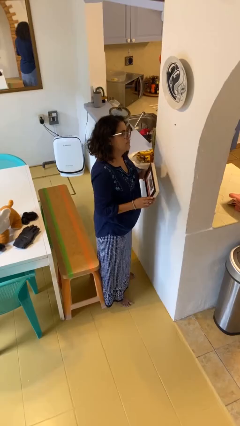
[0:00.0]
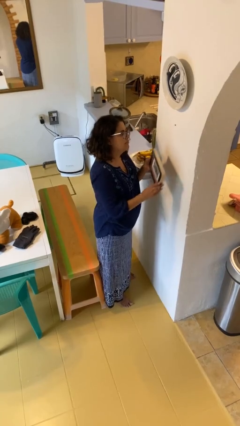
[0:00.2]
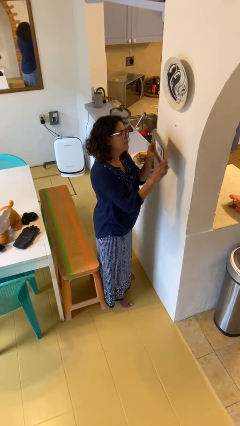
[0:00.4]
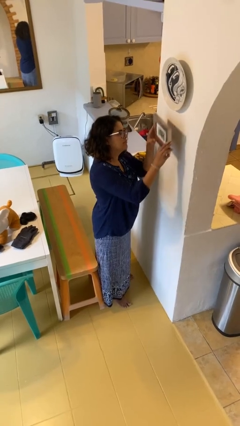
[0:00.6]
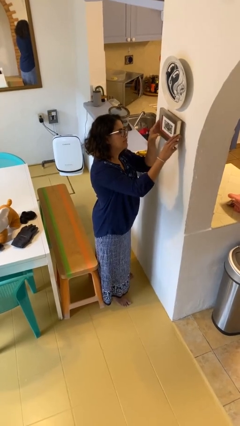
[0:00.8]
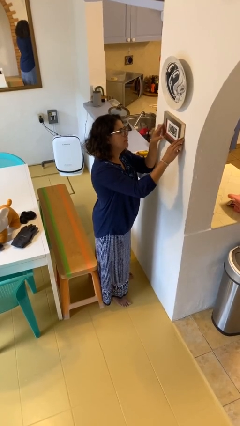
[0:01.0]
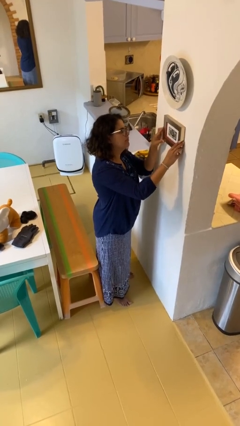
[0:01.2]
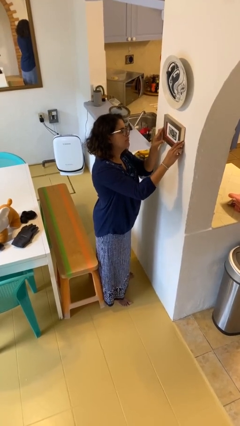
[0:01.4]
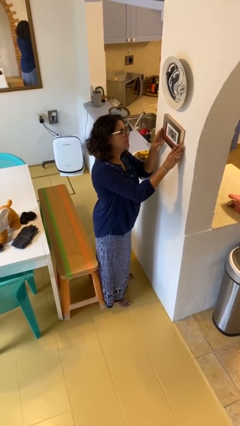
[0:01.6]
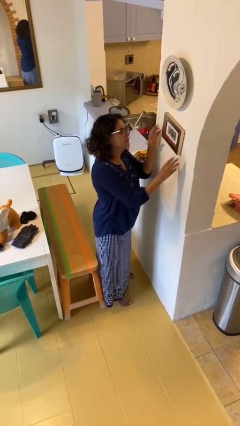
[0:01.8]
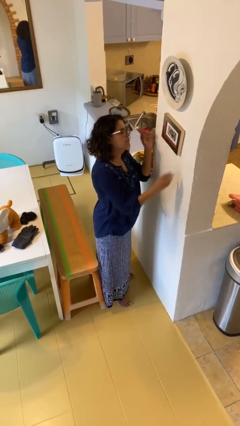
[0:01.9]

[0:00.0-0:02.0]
person puts up picture frame

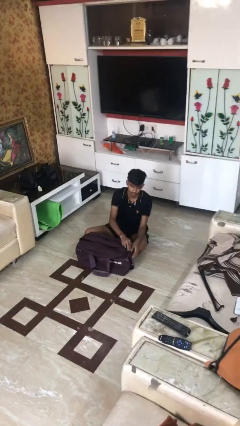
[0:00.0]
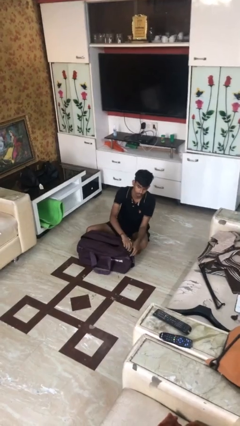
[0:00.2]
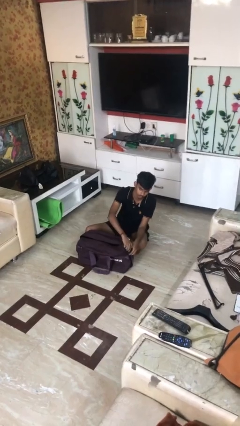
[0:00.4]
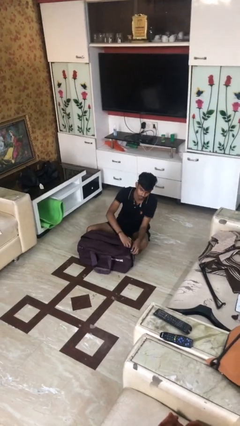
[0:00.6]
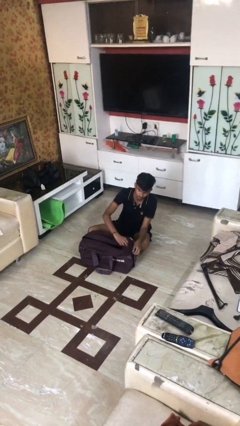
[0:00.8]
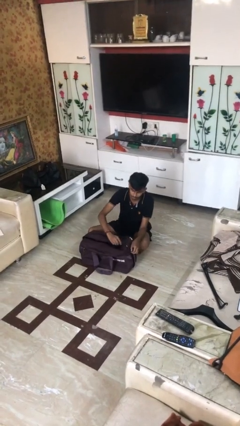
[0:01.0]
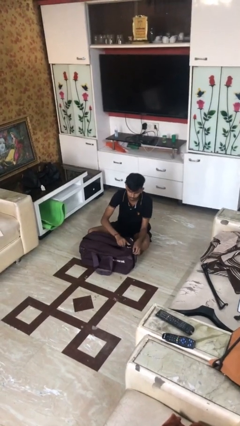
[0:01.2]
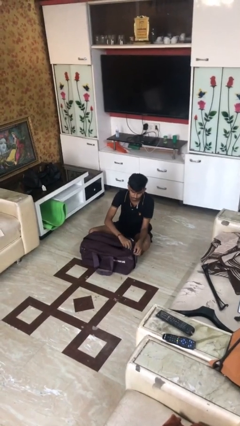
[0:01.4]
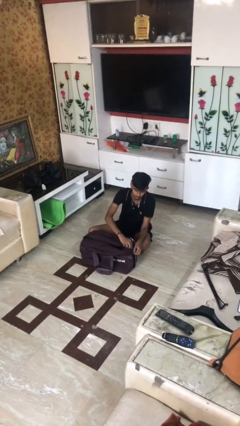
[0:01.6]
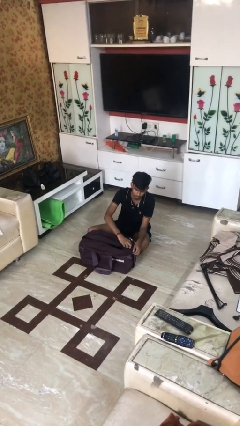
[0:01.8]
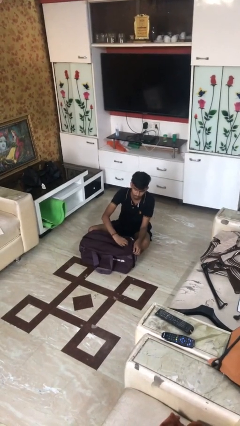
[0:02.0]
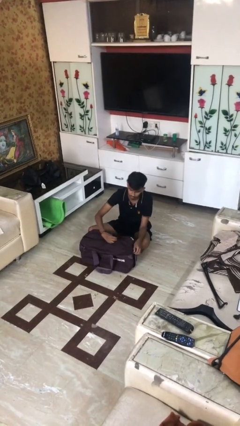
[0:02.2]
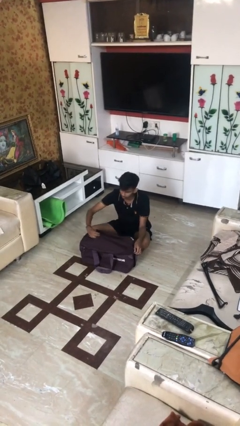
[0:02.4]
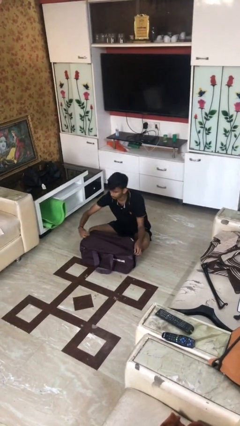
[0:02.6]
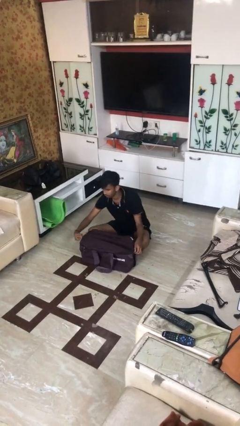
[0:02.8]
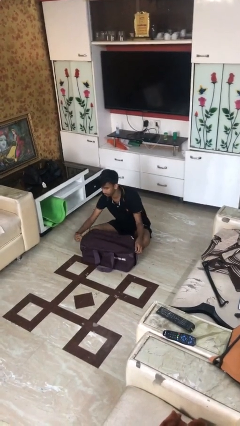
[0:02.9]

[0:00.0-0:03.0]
person closes suitcase

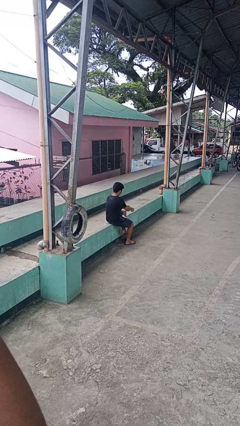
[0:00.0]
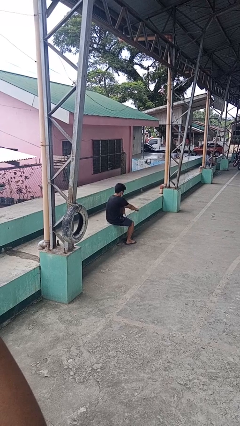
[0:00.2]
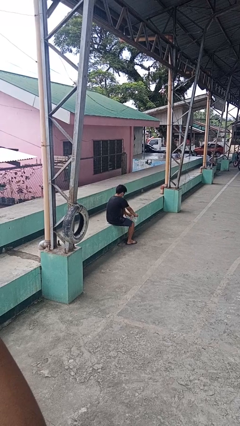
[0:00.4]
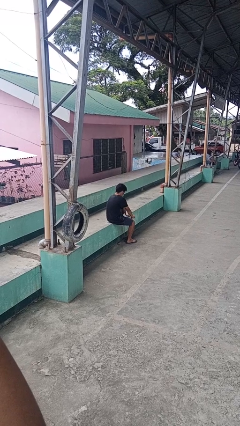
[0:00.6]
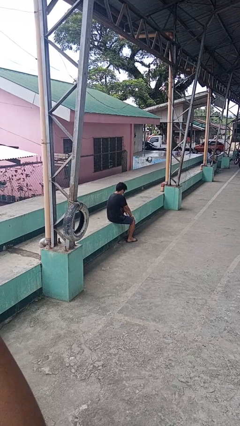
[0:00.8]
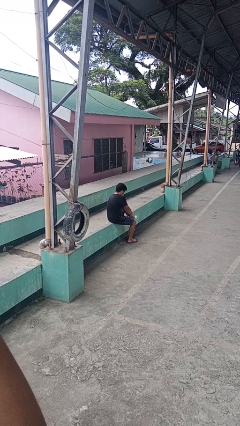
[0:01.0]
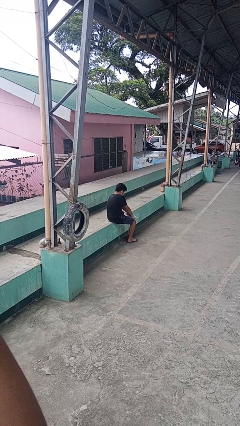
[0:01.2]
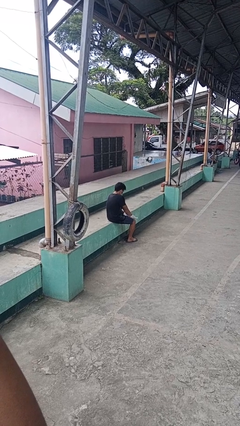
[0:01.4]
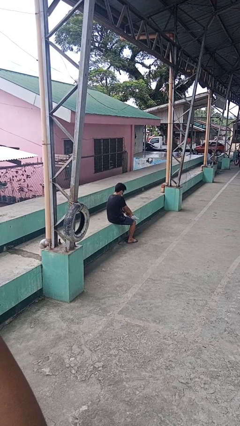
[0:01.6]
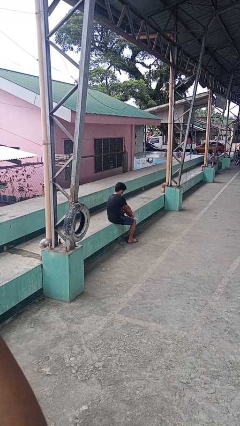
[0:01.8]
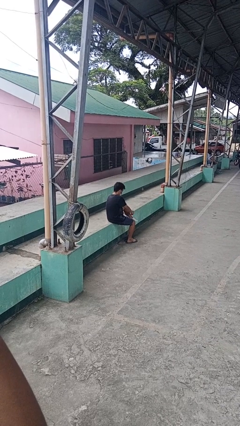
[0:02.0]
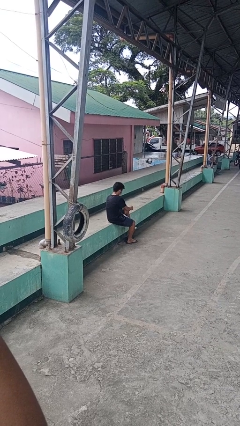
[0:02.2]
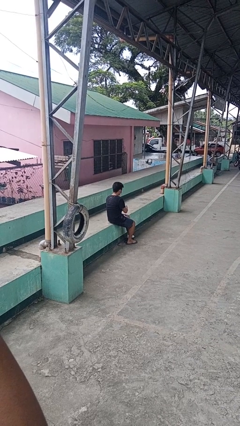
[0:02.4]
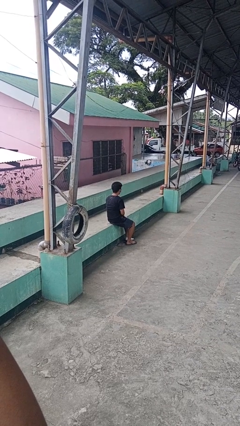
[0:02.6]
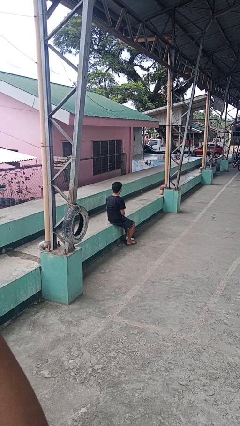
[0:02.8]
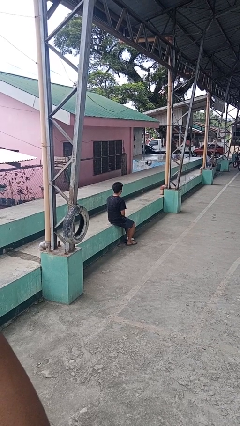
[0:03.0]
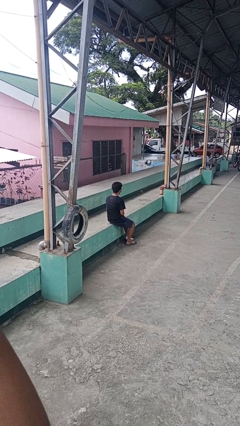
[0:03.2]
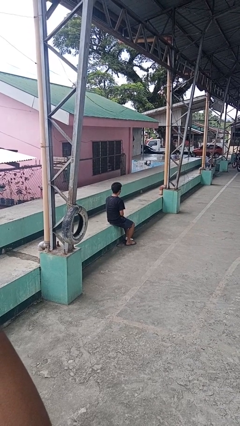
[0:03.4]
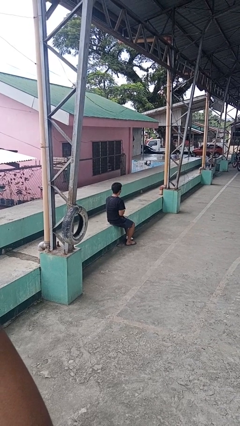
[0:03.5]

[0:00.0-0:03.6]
person puts on socks

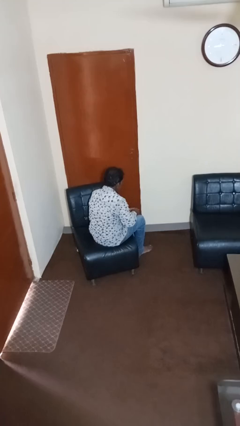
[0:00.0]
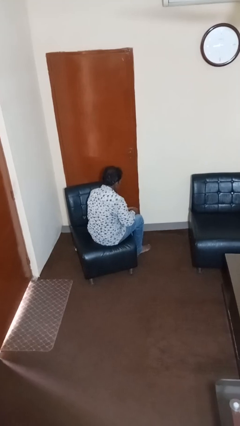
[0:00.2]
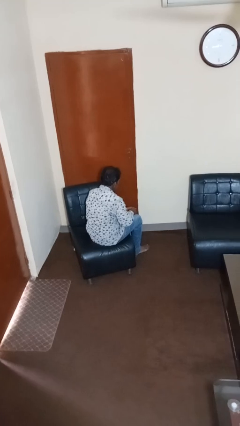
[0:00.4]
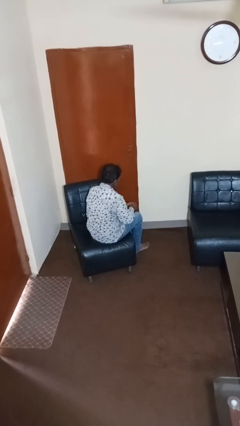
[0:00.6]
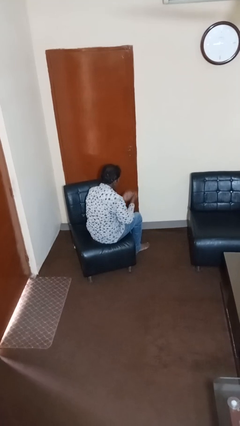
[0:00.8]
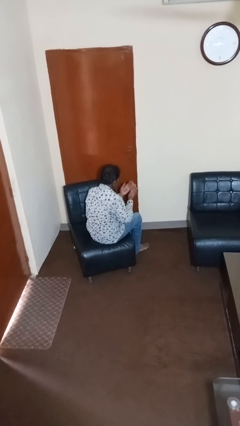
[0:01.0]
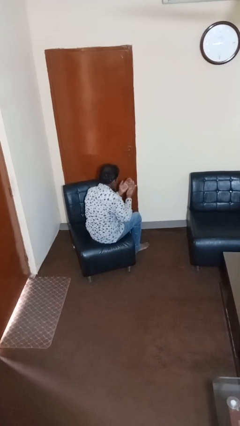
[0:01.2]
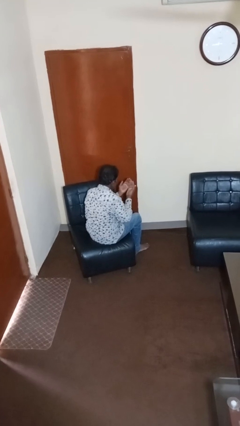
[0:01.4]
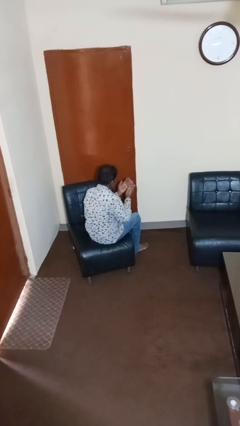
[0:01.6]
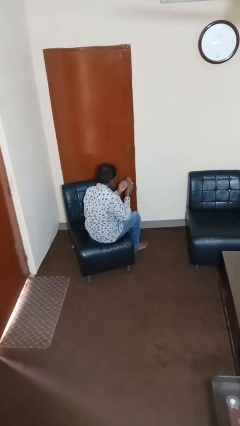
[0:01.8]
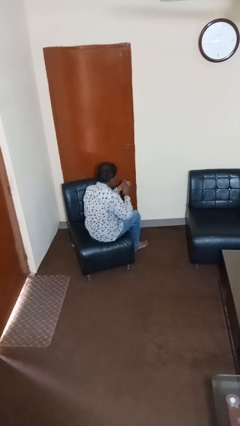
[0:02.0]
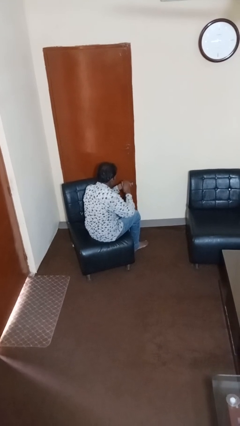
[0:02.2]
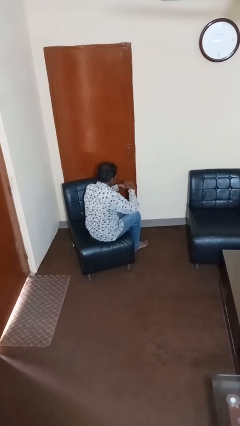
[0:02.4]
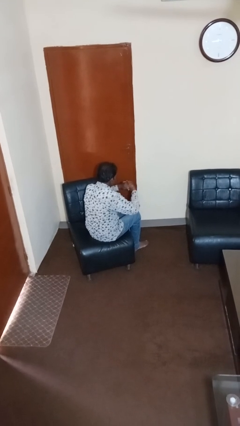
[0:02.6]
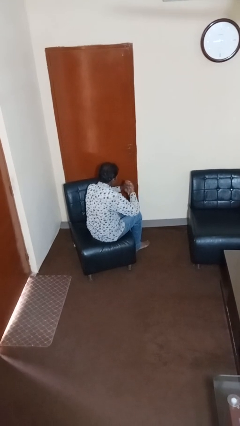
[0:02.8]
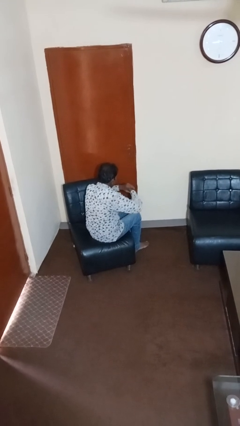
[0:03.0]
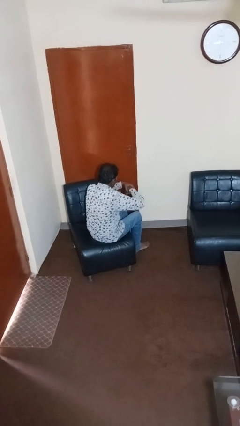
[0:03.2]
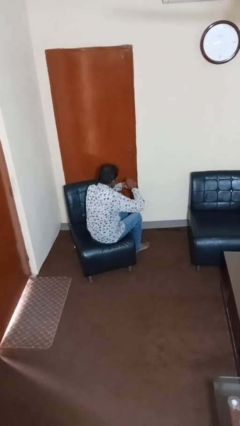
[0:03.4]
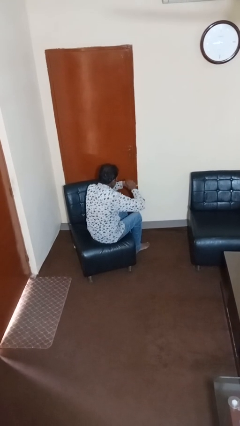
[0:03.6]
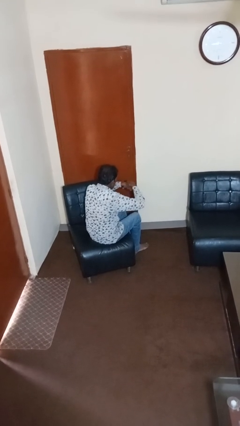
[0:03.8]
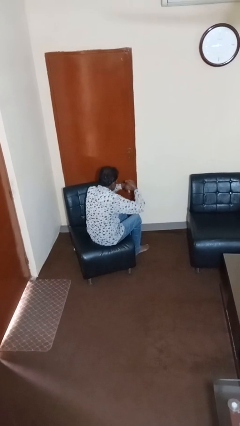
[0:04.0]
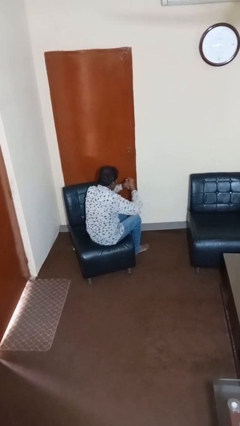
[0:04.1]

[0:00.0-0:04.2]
person looks at hands in lap

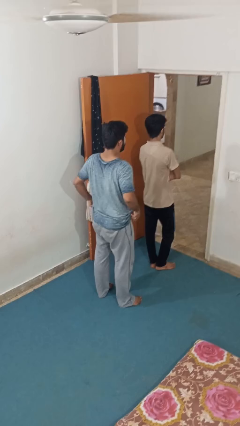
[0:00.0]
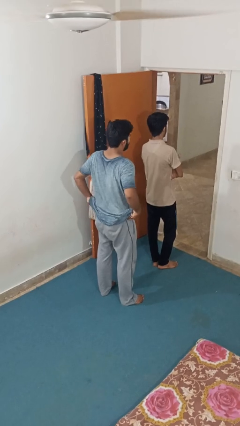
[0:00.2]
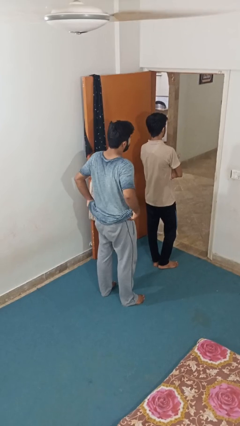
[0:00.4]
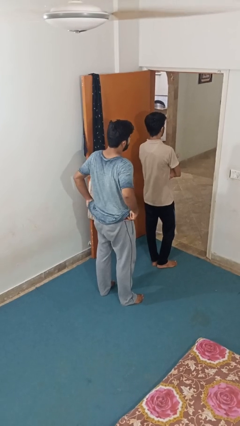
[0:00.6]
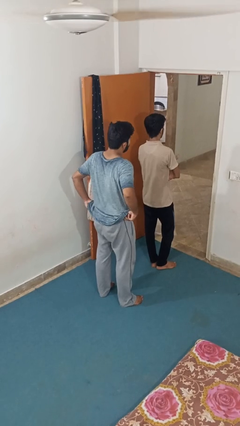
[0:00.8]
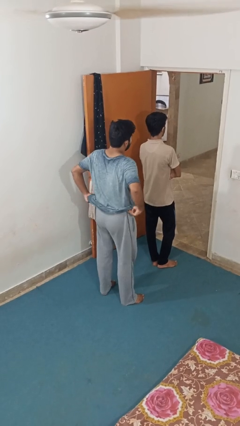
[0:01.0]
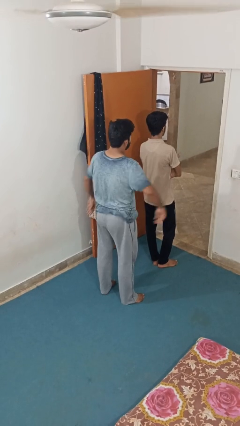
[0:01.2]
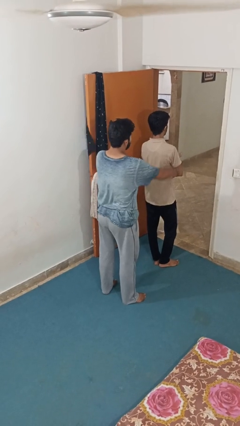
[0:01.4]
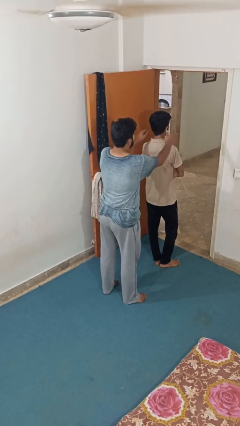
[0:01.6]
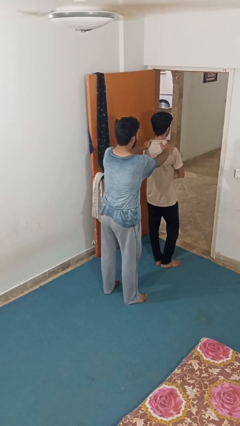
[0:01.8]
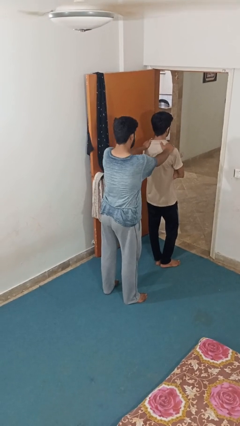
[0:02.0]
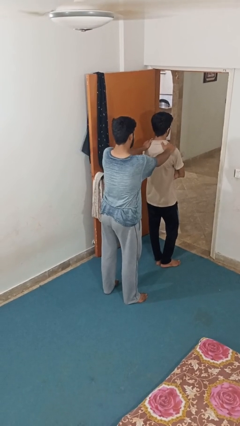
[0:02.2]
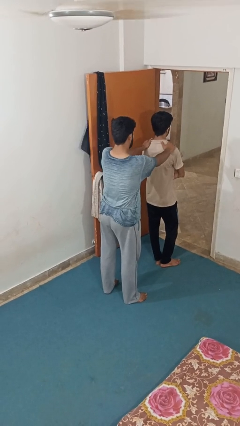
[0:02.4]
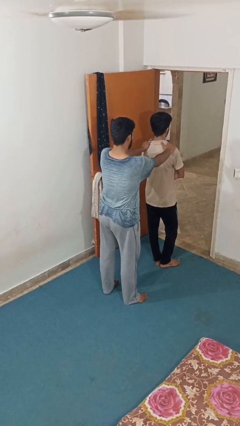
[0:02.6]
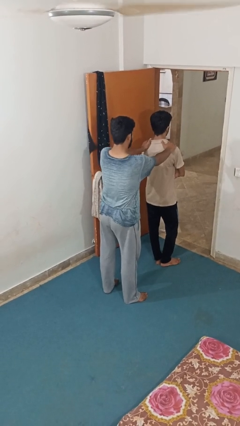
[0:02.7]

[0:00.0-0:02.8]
person grabs person by shoulder

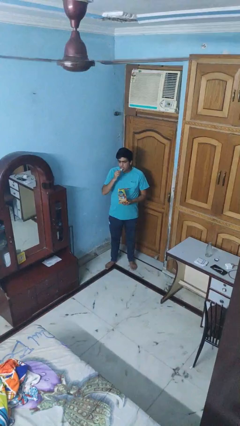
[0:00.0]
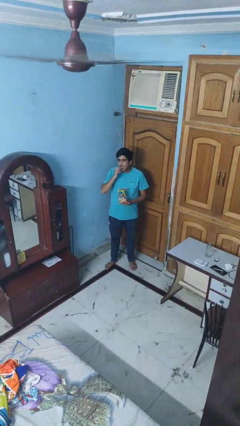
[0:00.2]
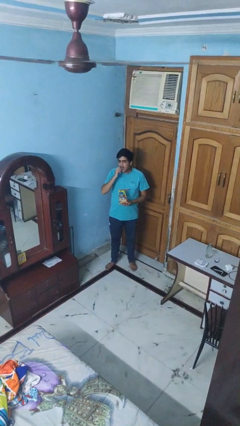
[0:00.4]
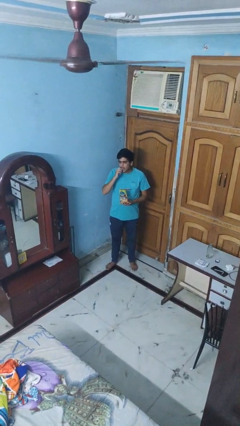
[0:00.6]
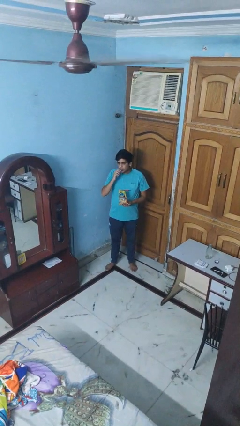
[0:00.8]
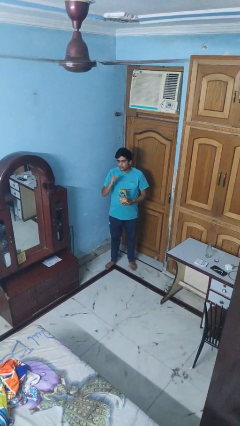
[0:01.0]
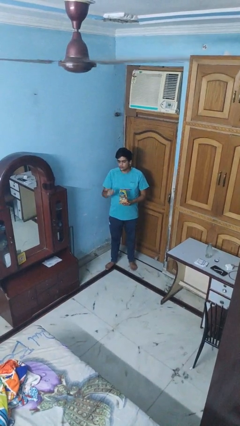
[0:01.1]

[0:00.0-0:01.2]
person eats snack from bag

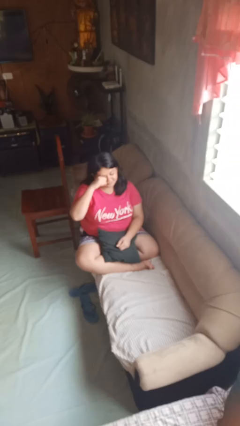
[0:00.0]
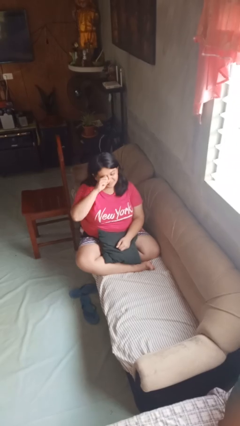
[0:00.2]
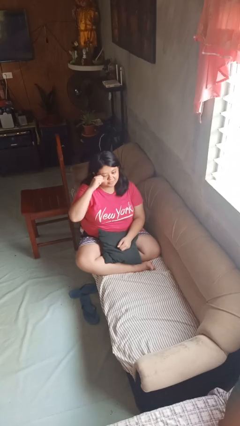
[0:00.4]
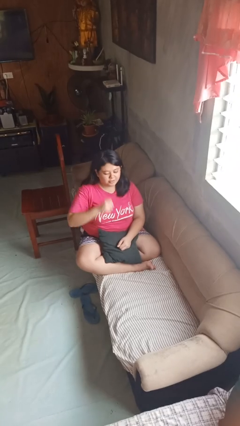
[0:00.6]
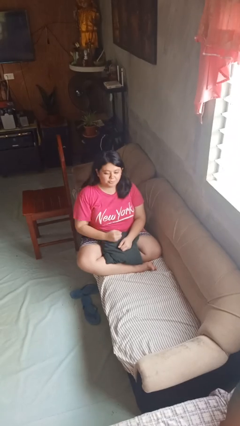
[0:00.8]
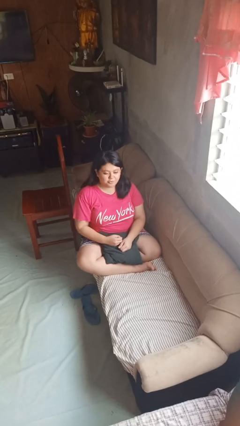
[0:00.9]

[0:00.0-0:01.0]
person rubs eyes
